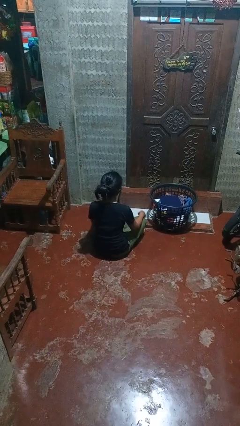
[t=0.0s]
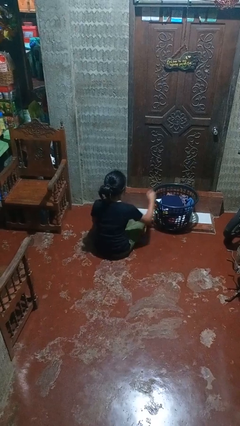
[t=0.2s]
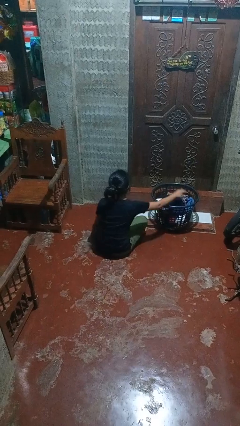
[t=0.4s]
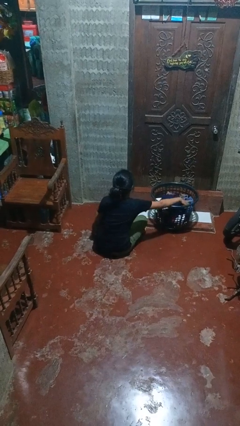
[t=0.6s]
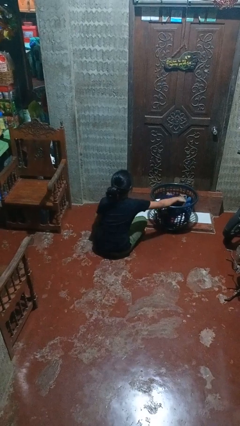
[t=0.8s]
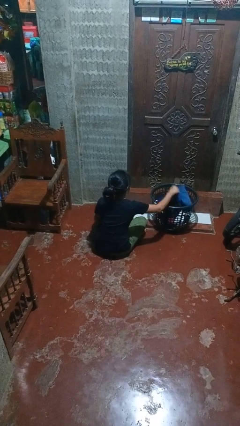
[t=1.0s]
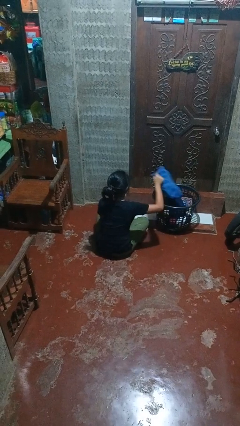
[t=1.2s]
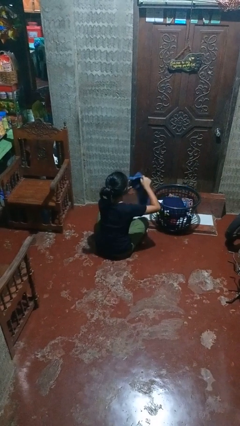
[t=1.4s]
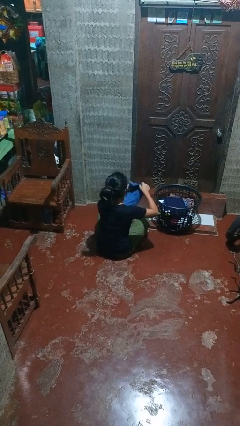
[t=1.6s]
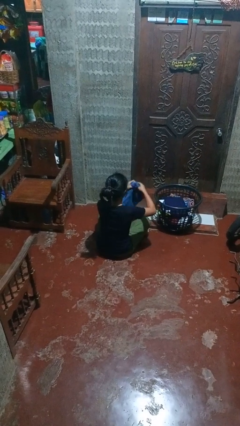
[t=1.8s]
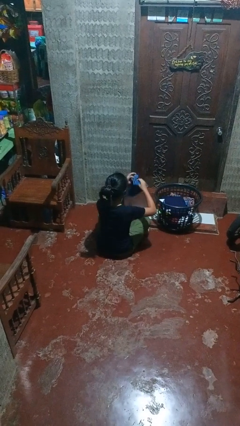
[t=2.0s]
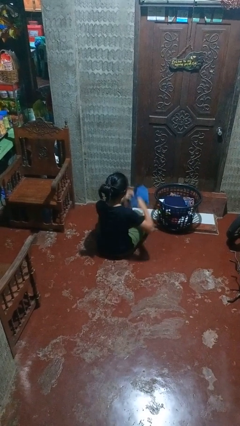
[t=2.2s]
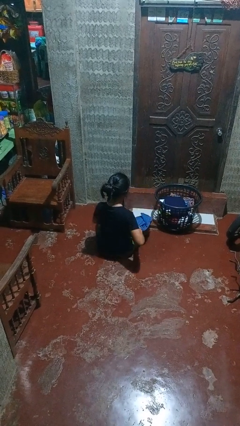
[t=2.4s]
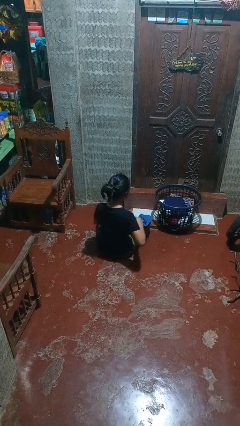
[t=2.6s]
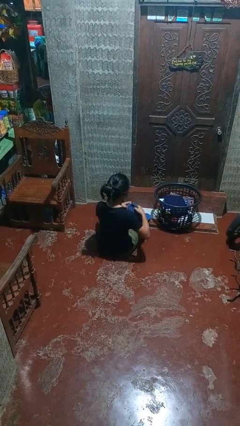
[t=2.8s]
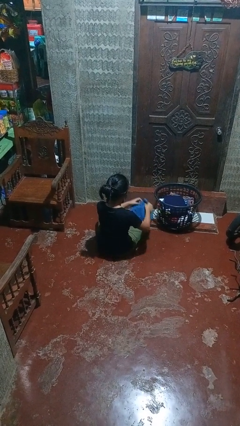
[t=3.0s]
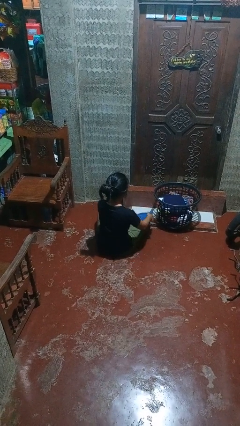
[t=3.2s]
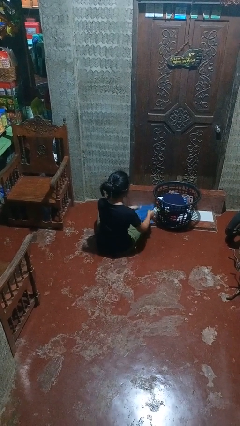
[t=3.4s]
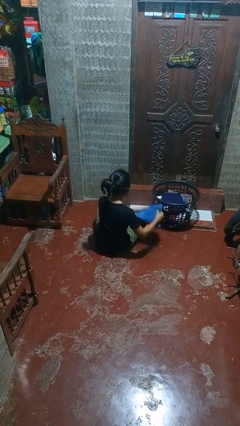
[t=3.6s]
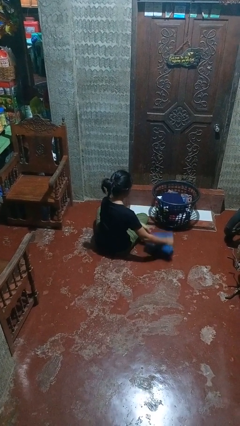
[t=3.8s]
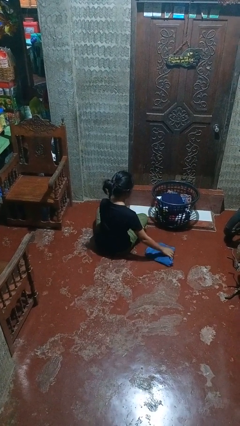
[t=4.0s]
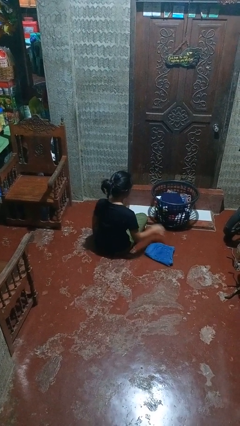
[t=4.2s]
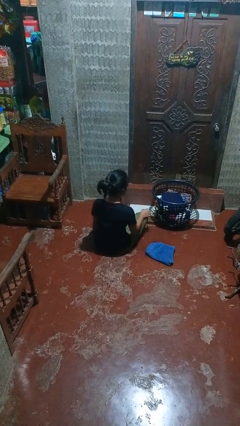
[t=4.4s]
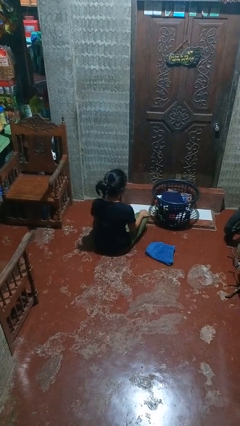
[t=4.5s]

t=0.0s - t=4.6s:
person folds pants

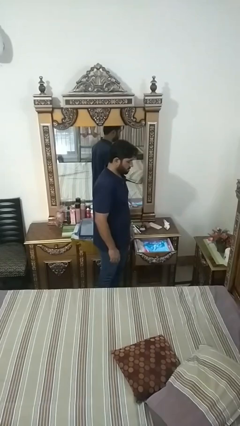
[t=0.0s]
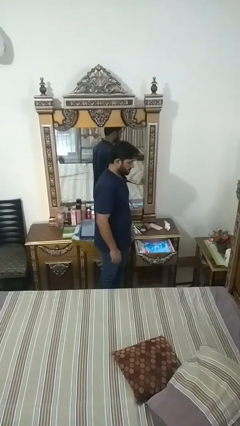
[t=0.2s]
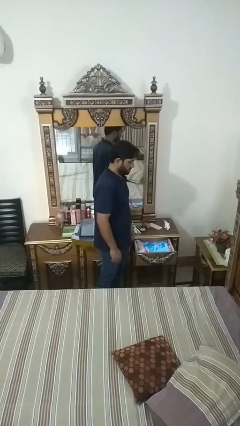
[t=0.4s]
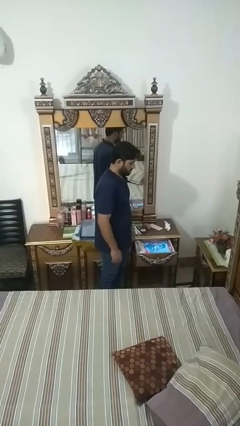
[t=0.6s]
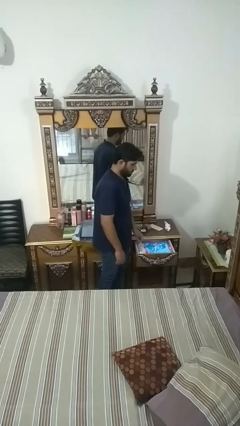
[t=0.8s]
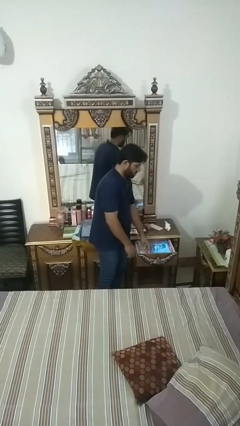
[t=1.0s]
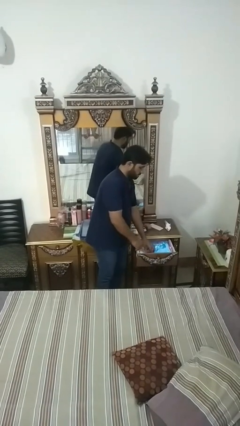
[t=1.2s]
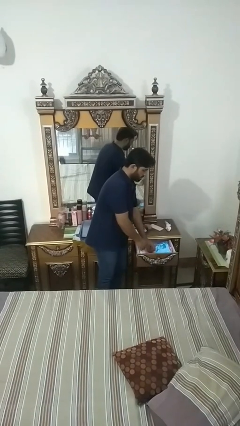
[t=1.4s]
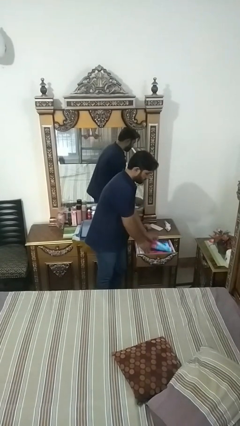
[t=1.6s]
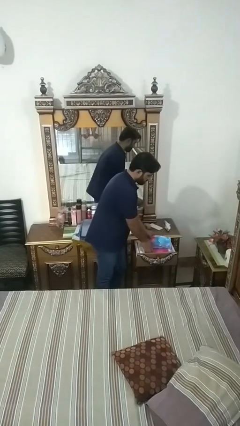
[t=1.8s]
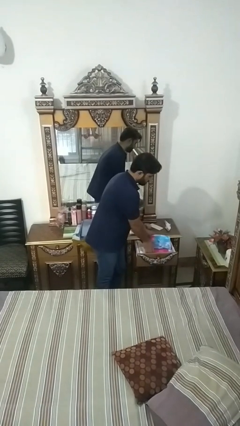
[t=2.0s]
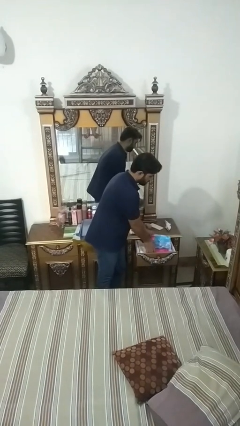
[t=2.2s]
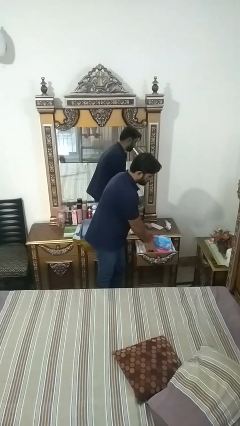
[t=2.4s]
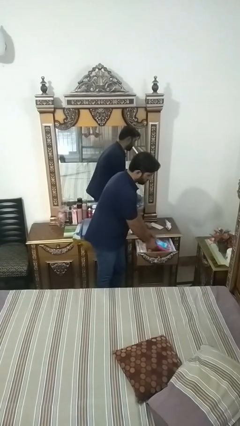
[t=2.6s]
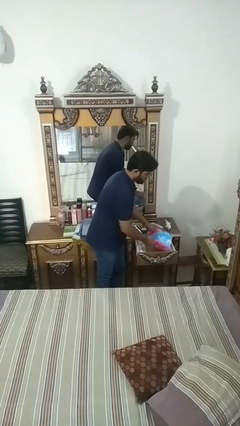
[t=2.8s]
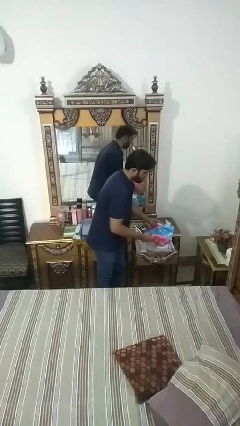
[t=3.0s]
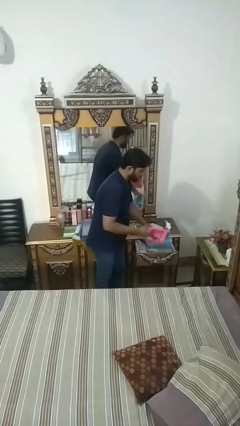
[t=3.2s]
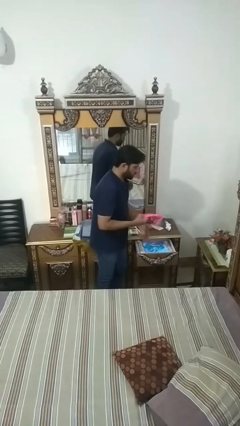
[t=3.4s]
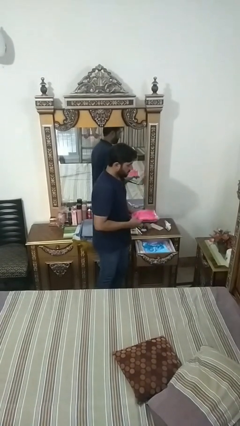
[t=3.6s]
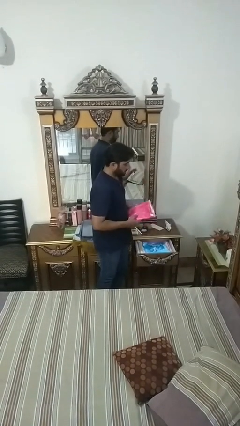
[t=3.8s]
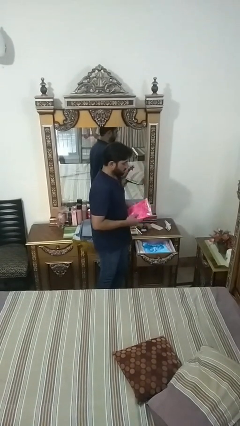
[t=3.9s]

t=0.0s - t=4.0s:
person takes clothes from dresser

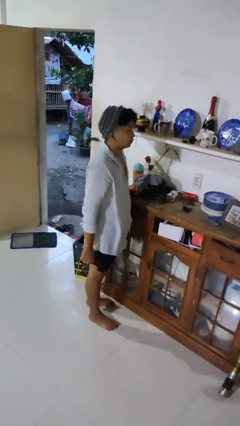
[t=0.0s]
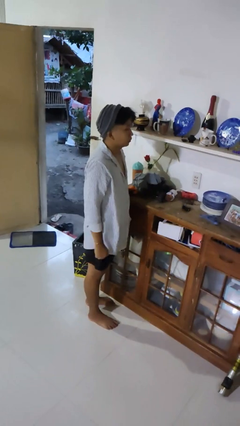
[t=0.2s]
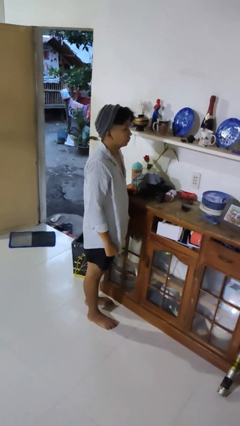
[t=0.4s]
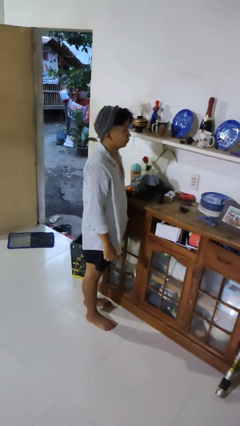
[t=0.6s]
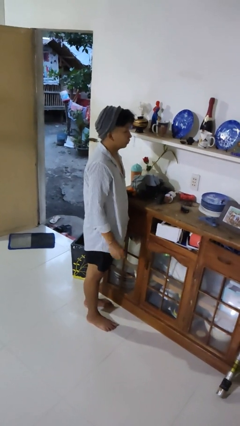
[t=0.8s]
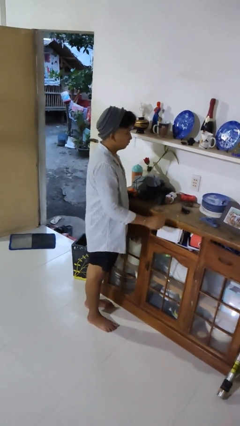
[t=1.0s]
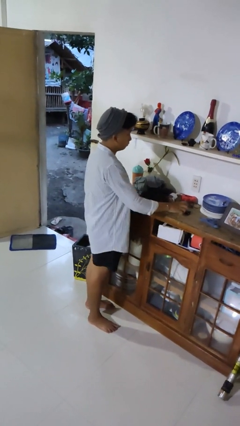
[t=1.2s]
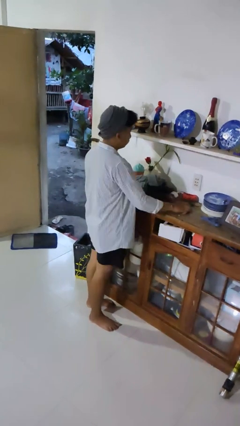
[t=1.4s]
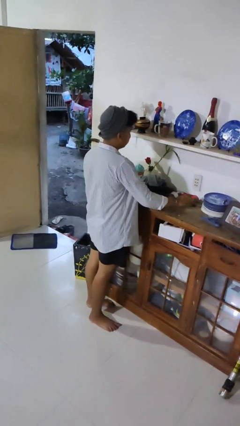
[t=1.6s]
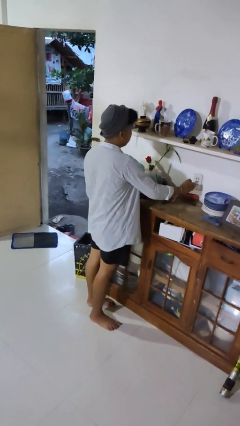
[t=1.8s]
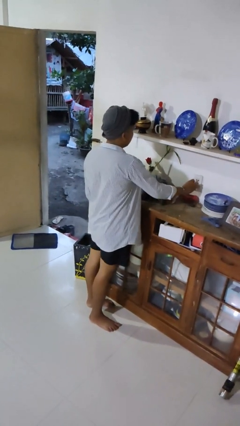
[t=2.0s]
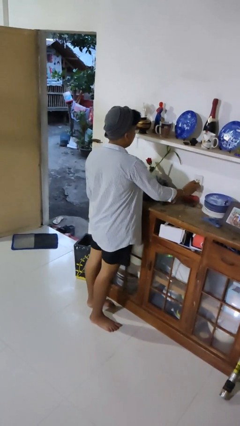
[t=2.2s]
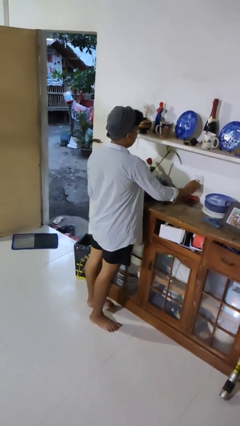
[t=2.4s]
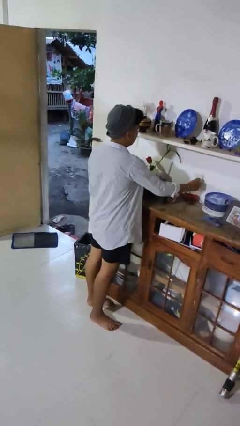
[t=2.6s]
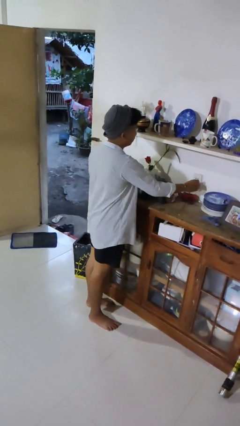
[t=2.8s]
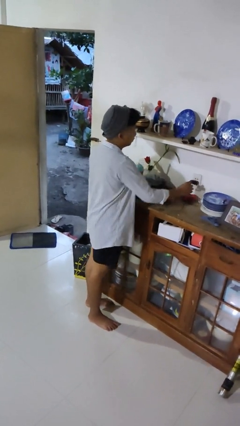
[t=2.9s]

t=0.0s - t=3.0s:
person plugs into electrical socket

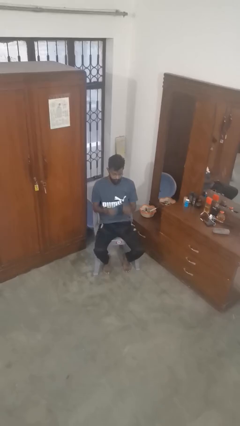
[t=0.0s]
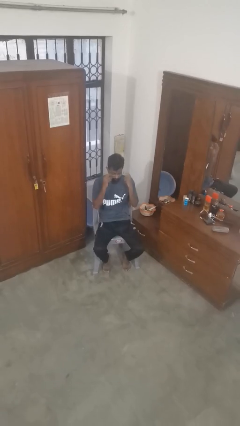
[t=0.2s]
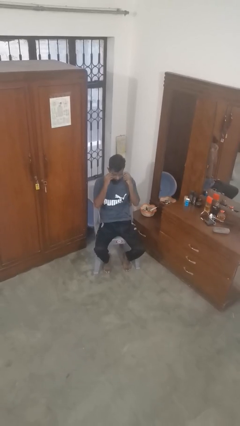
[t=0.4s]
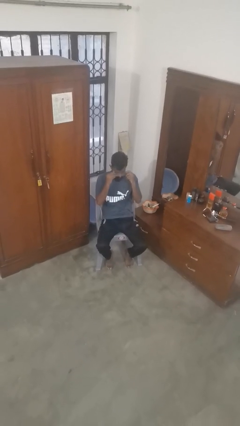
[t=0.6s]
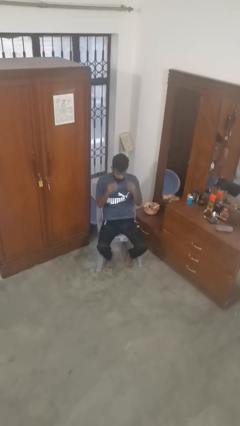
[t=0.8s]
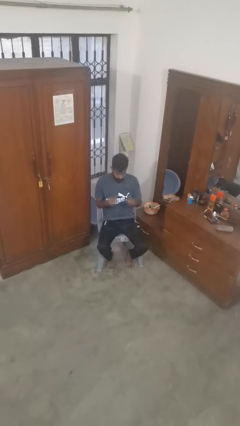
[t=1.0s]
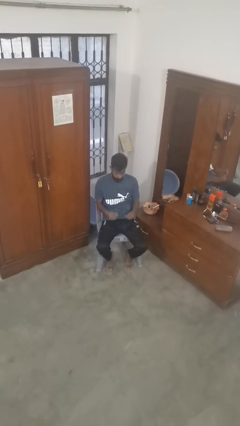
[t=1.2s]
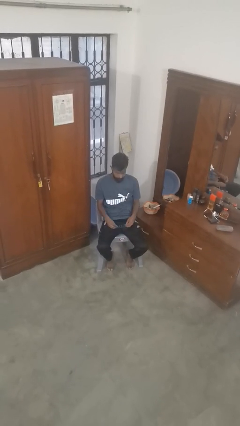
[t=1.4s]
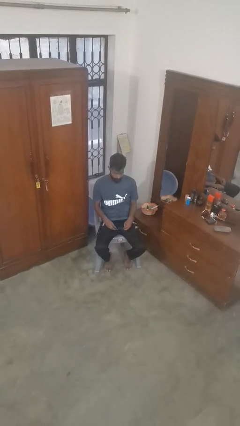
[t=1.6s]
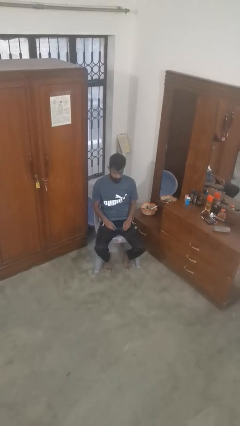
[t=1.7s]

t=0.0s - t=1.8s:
person takes off glasses

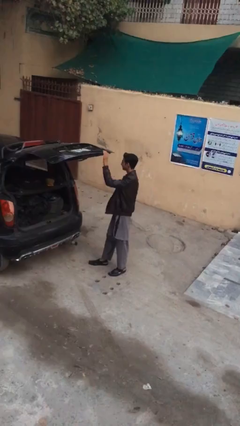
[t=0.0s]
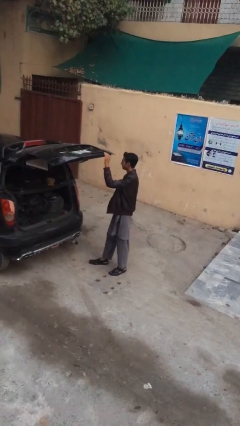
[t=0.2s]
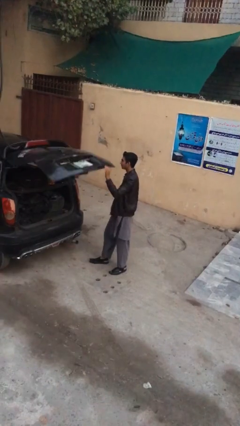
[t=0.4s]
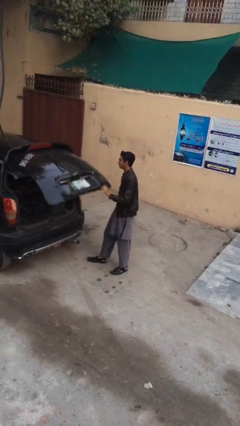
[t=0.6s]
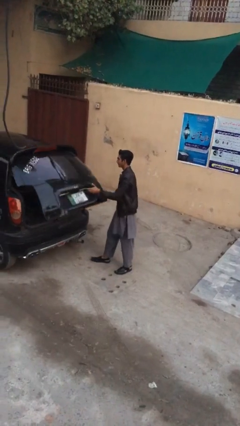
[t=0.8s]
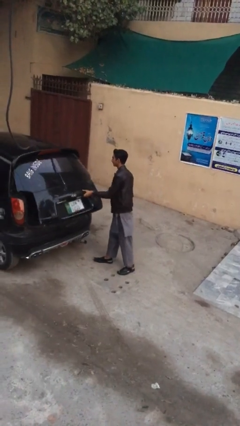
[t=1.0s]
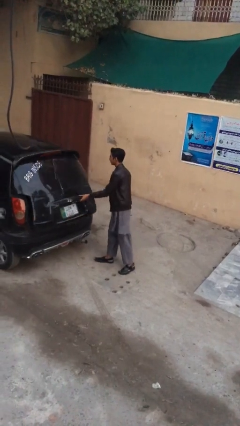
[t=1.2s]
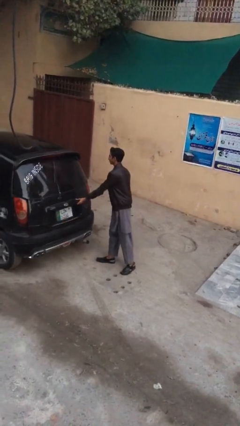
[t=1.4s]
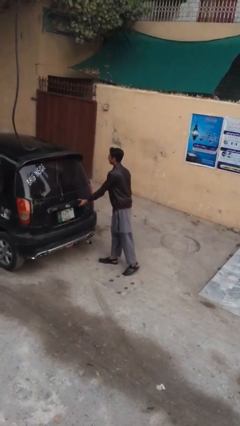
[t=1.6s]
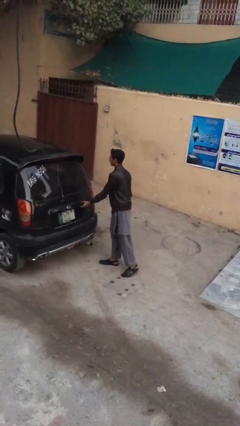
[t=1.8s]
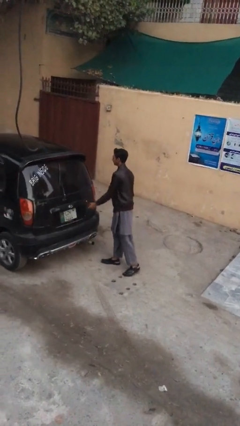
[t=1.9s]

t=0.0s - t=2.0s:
person closes car trunk

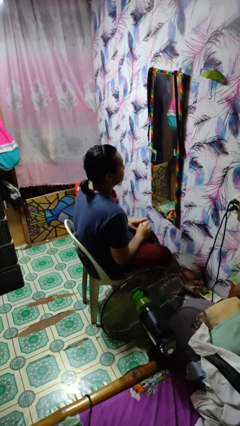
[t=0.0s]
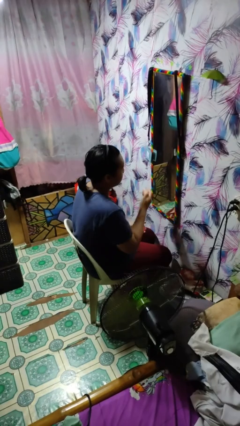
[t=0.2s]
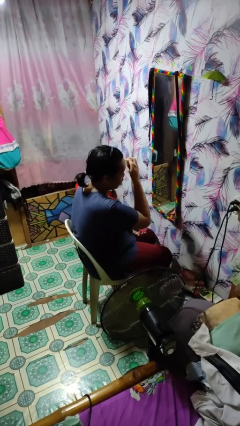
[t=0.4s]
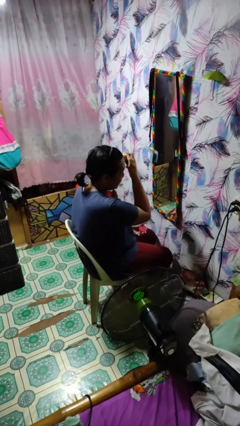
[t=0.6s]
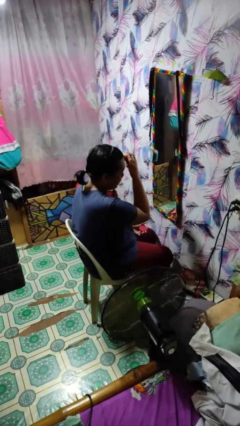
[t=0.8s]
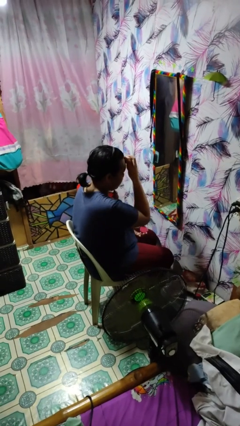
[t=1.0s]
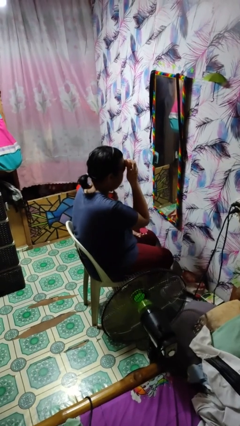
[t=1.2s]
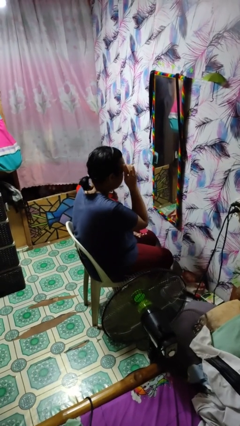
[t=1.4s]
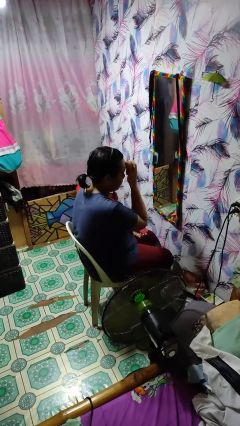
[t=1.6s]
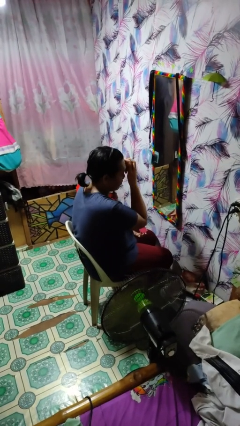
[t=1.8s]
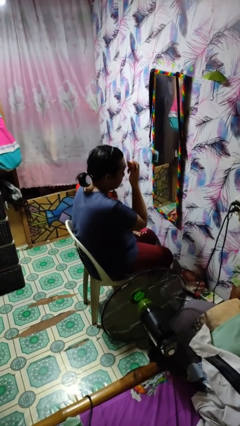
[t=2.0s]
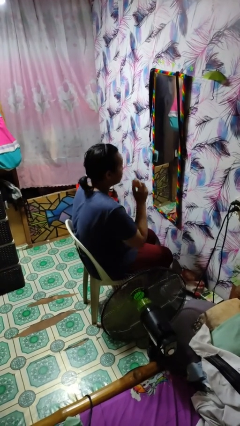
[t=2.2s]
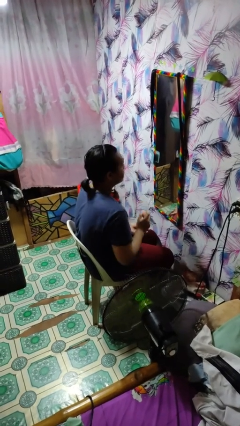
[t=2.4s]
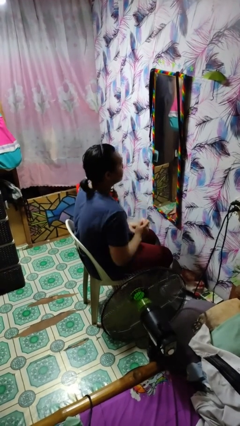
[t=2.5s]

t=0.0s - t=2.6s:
person applies foundation makeup
